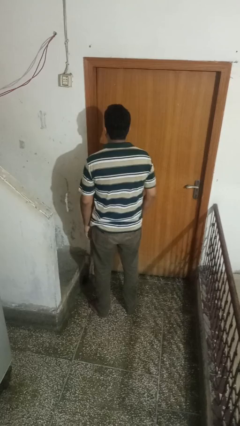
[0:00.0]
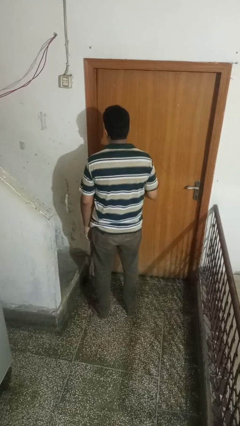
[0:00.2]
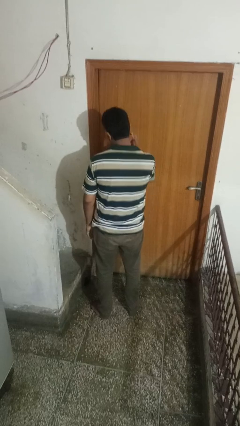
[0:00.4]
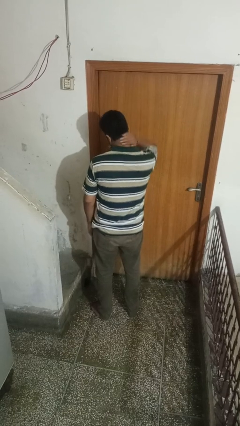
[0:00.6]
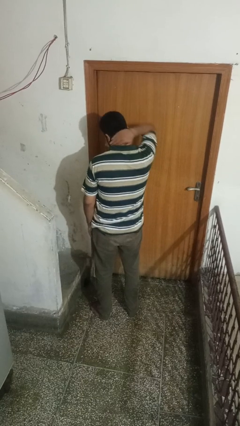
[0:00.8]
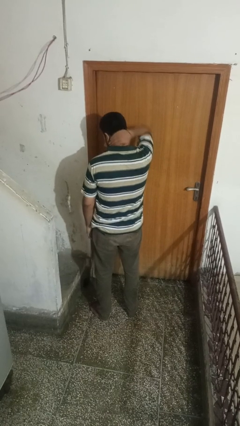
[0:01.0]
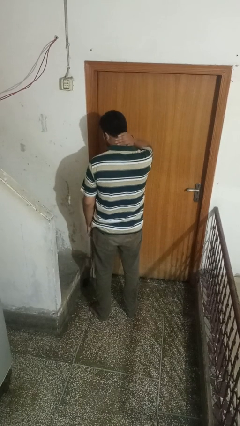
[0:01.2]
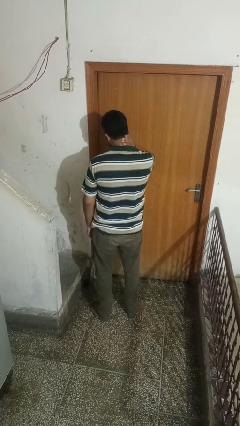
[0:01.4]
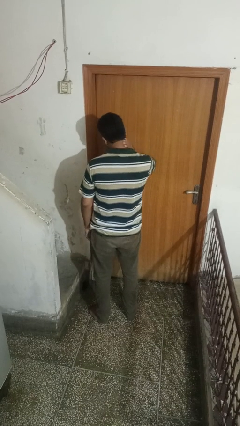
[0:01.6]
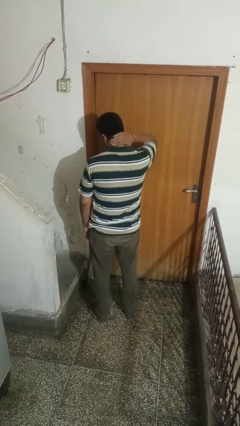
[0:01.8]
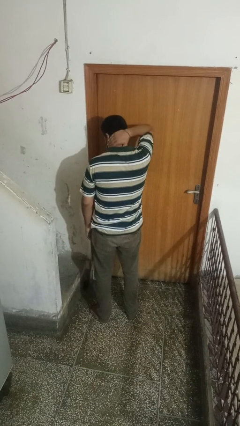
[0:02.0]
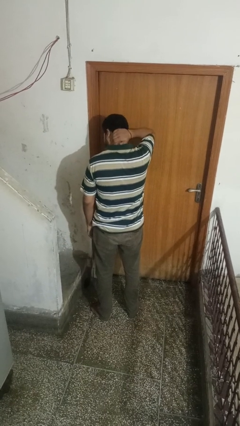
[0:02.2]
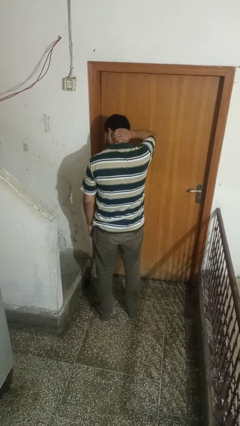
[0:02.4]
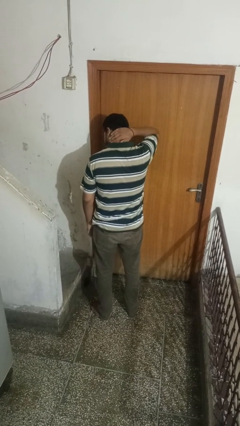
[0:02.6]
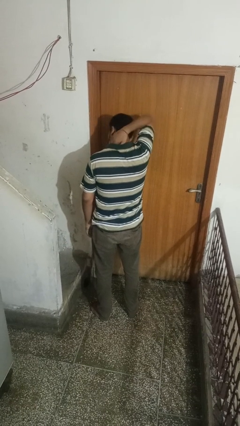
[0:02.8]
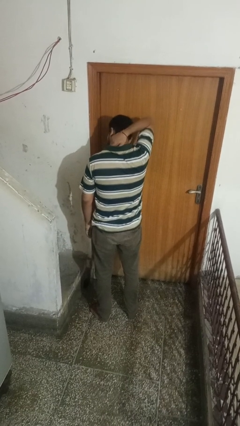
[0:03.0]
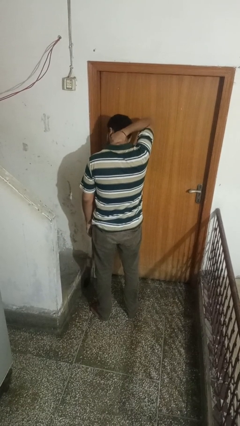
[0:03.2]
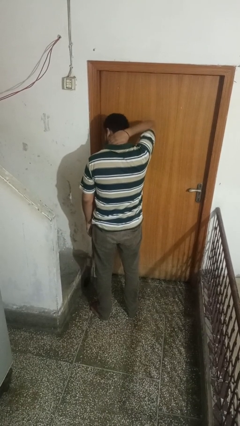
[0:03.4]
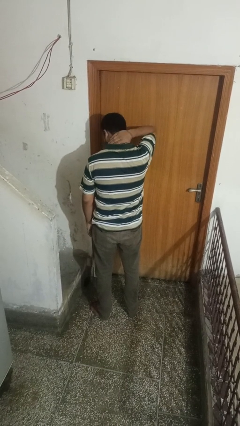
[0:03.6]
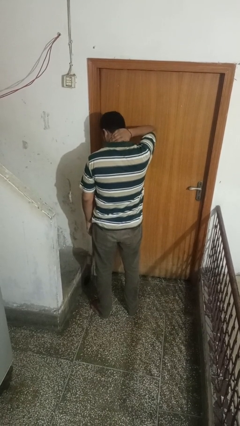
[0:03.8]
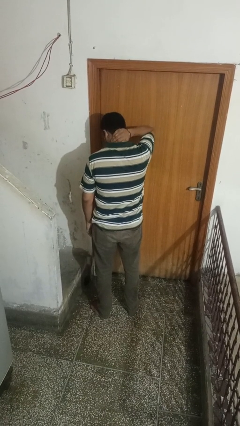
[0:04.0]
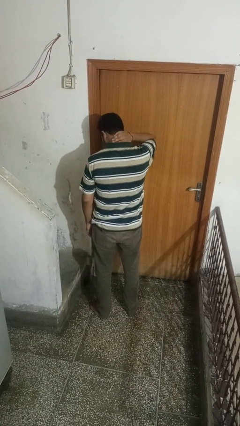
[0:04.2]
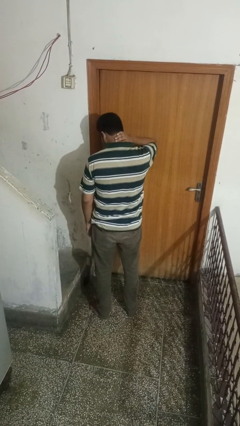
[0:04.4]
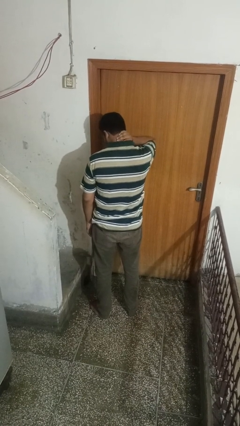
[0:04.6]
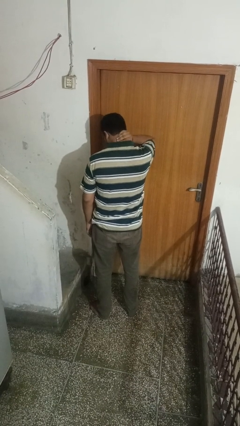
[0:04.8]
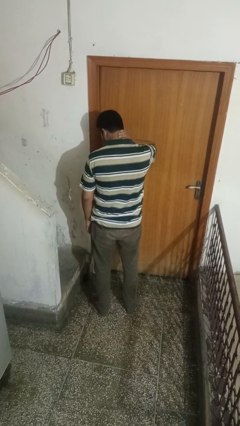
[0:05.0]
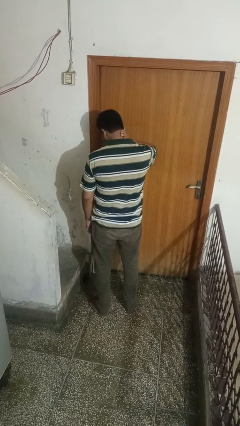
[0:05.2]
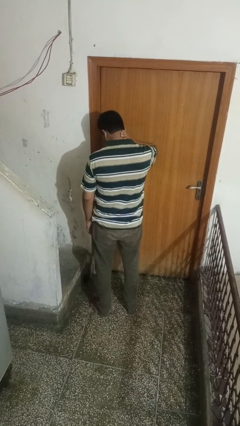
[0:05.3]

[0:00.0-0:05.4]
person rubs neck

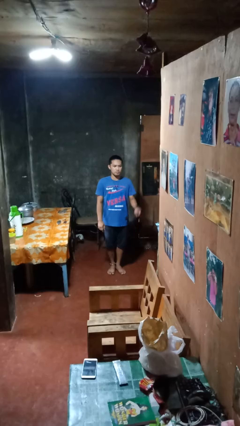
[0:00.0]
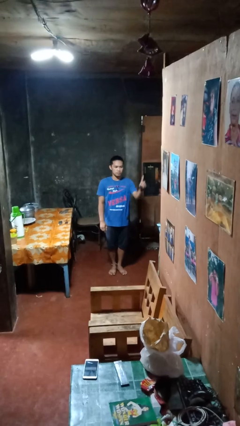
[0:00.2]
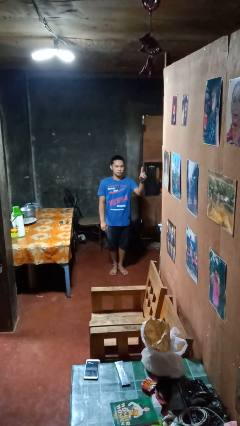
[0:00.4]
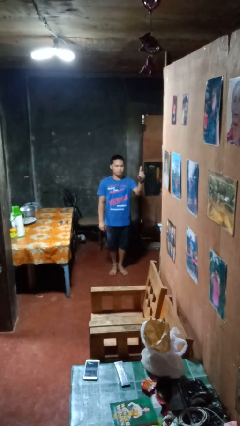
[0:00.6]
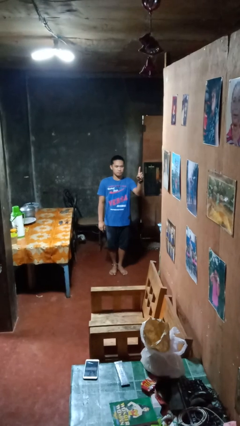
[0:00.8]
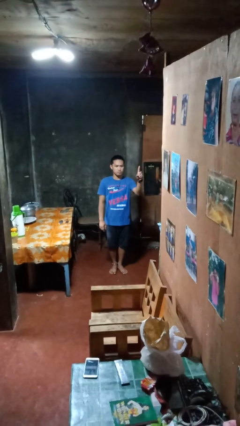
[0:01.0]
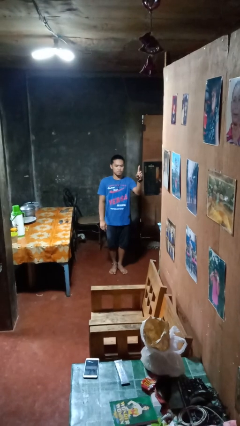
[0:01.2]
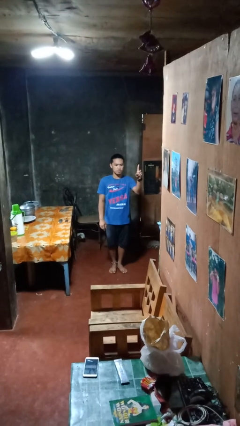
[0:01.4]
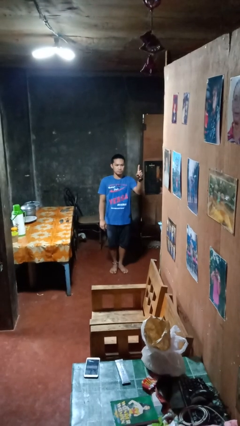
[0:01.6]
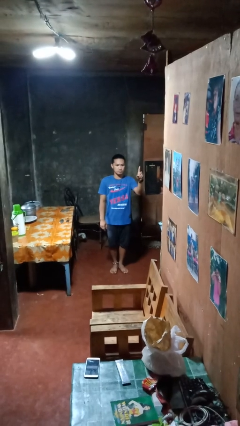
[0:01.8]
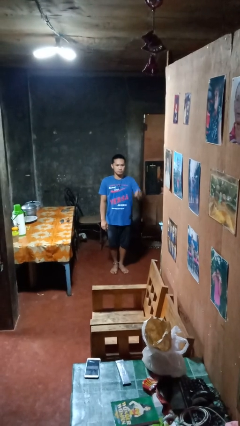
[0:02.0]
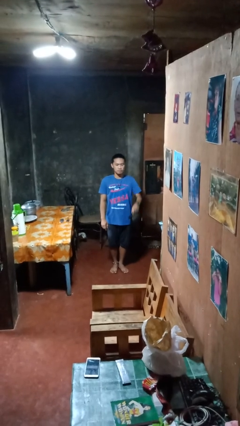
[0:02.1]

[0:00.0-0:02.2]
person gestures number one

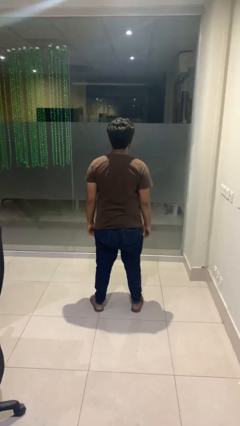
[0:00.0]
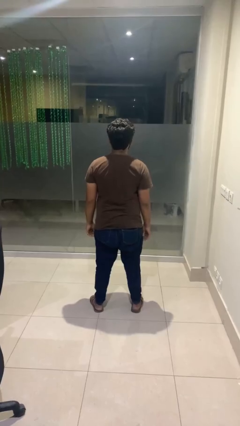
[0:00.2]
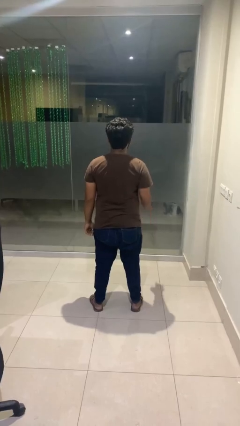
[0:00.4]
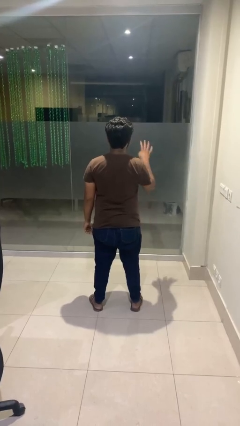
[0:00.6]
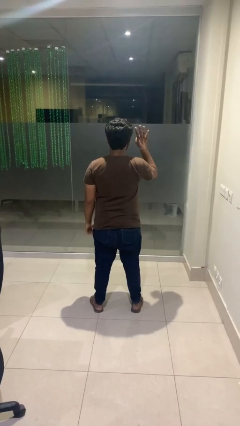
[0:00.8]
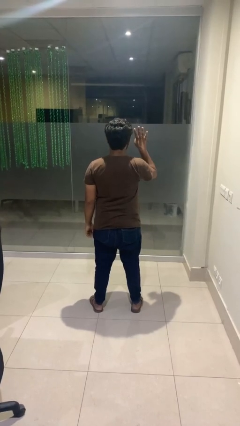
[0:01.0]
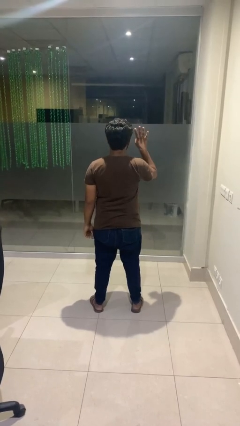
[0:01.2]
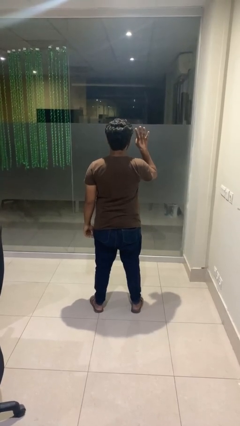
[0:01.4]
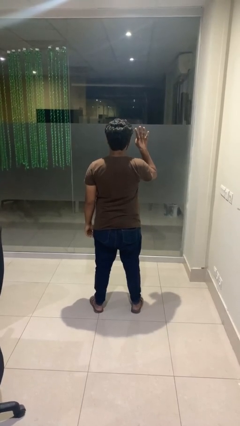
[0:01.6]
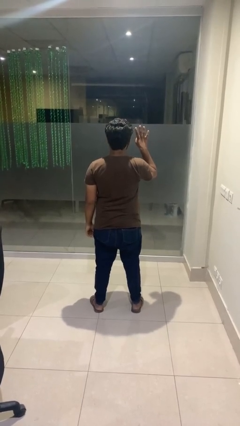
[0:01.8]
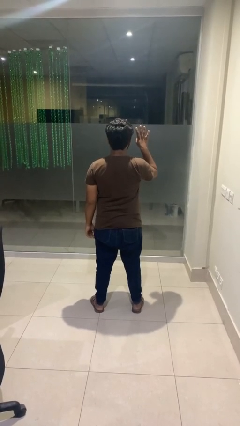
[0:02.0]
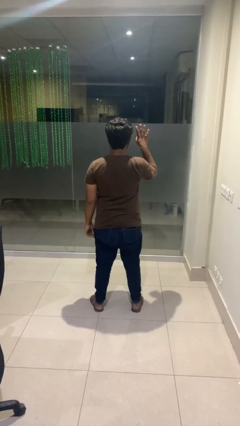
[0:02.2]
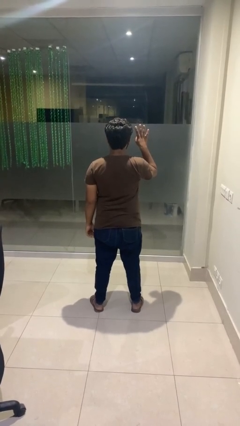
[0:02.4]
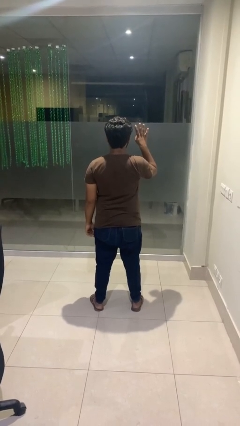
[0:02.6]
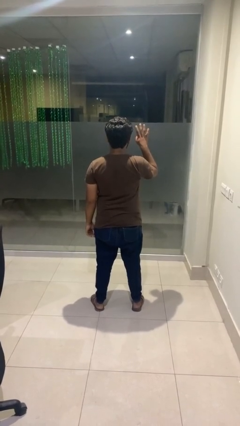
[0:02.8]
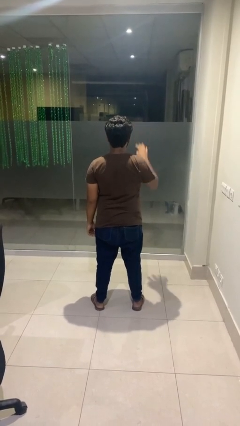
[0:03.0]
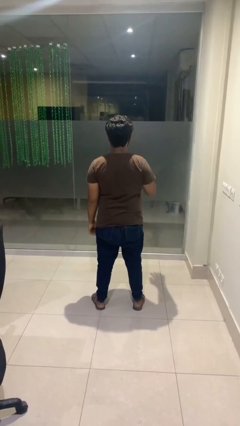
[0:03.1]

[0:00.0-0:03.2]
person gestures number four

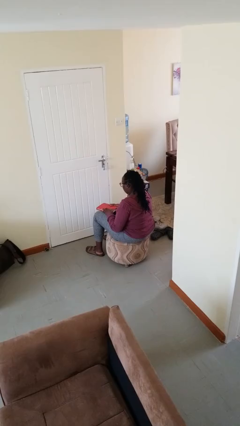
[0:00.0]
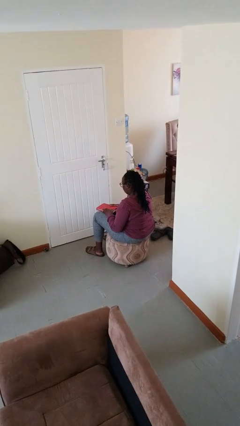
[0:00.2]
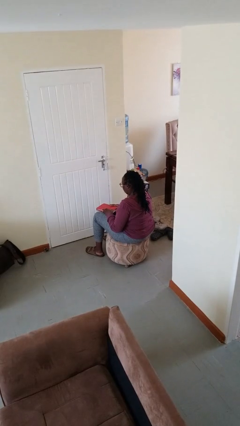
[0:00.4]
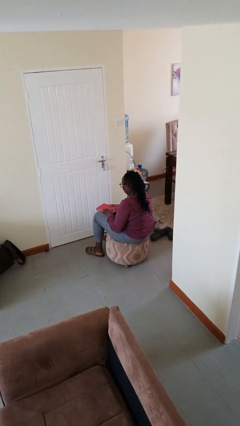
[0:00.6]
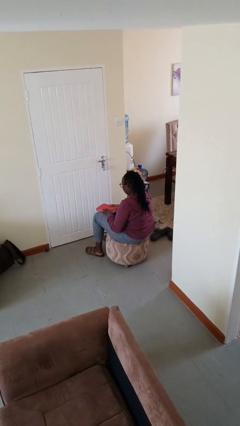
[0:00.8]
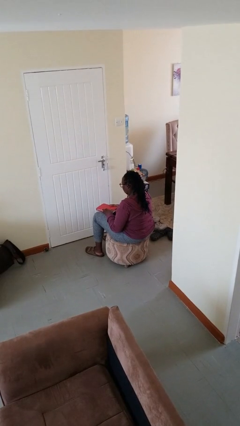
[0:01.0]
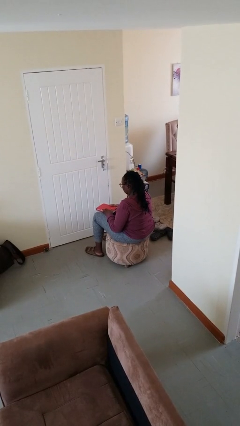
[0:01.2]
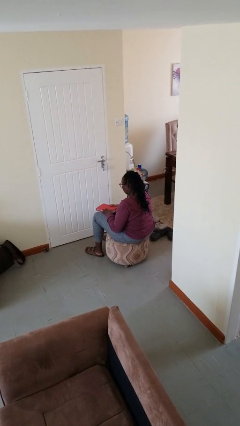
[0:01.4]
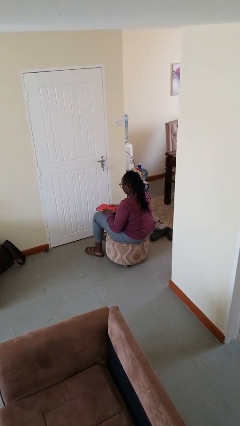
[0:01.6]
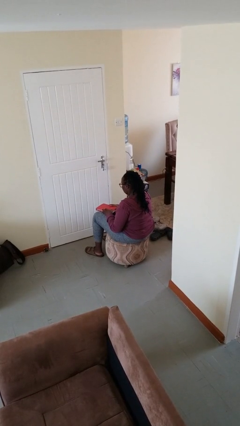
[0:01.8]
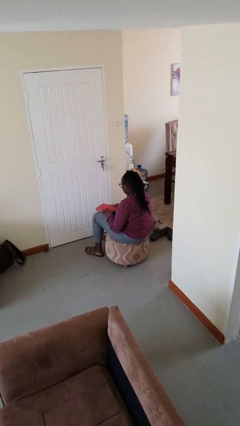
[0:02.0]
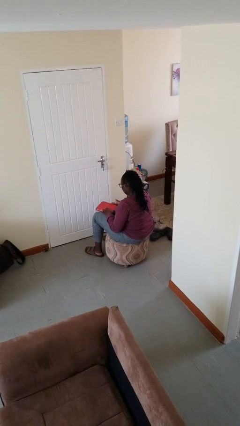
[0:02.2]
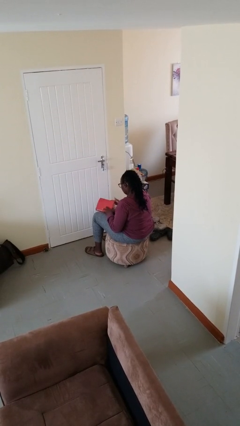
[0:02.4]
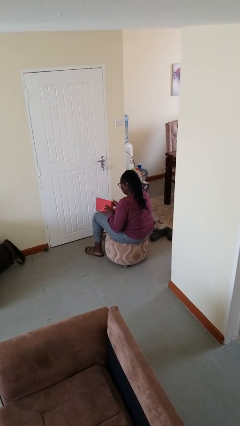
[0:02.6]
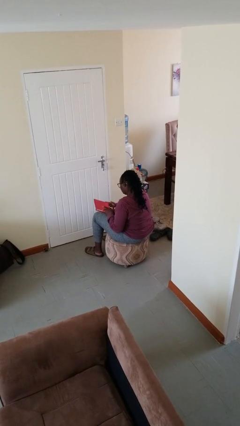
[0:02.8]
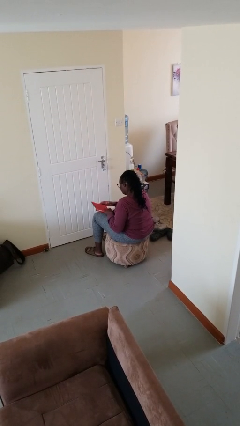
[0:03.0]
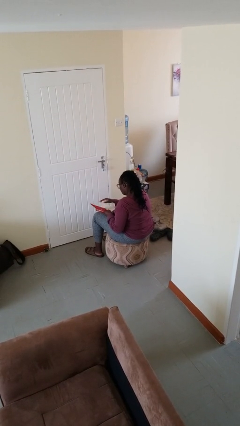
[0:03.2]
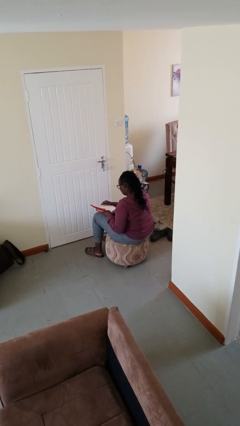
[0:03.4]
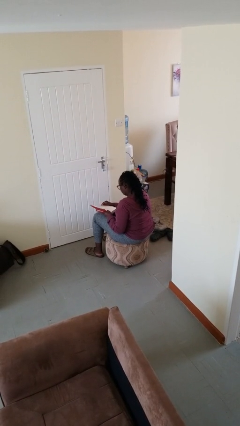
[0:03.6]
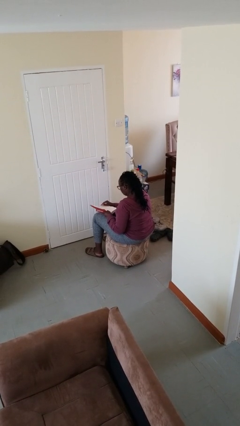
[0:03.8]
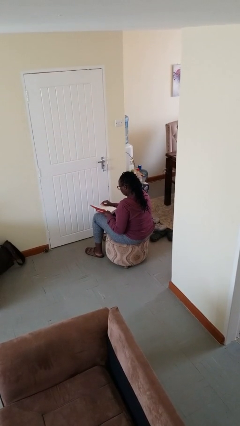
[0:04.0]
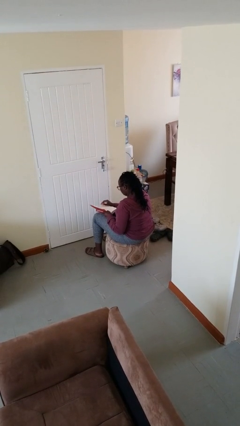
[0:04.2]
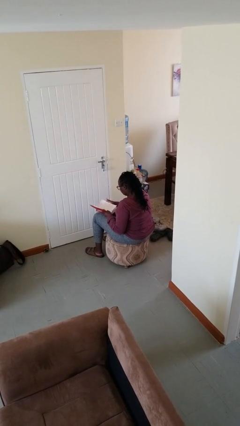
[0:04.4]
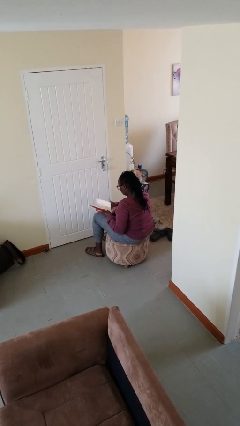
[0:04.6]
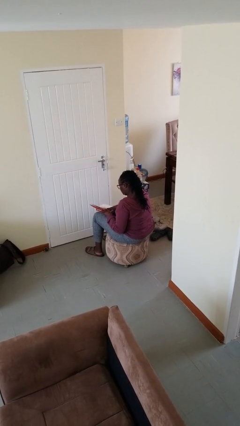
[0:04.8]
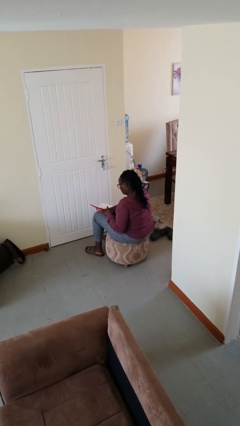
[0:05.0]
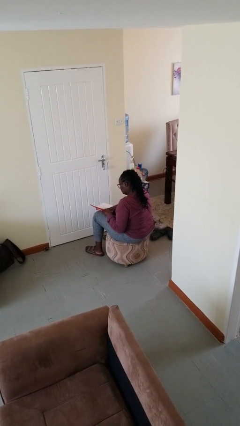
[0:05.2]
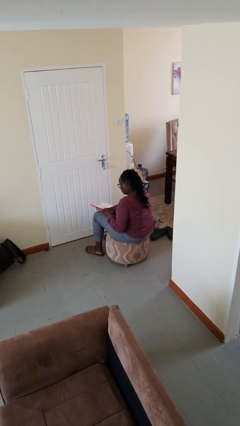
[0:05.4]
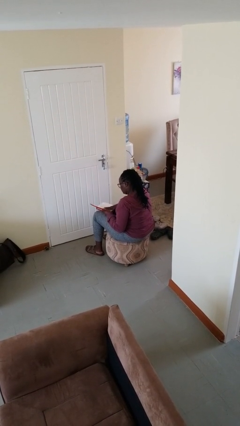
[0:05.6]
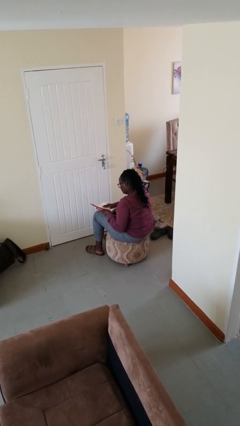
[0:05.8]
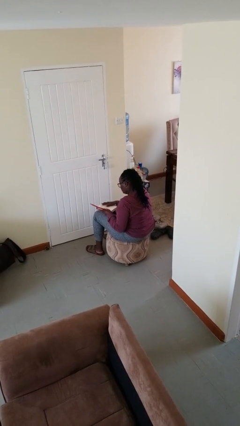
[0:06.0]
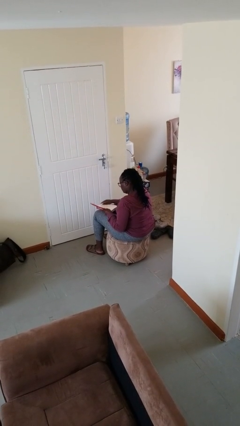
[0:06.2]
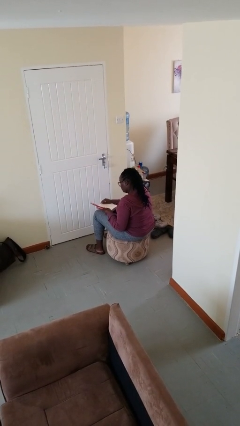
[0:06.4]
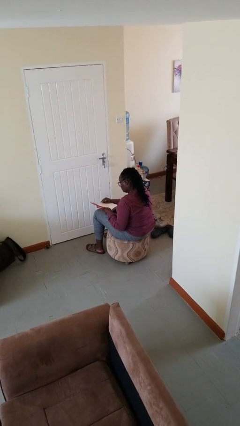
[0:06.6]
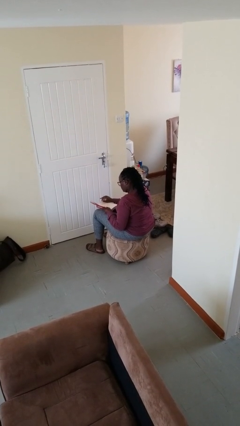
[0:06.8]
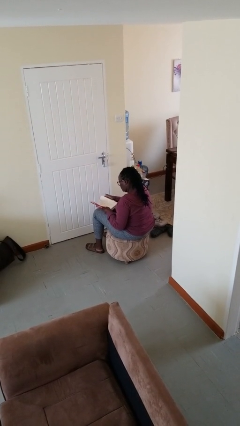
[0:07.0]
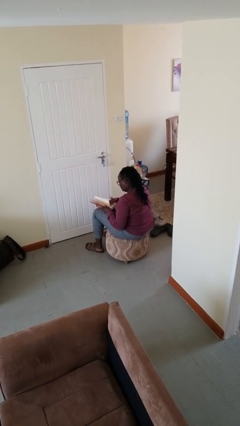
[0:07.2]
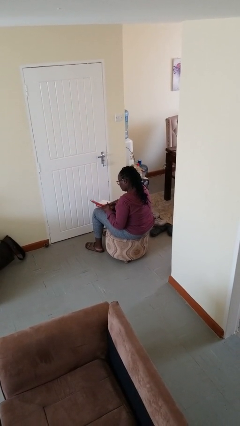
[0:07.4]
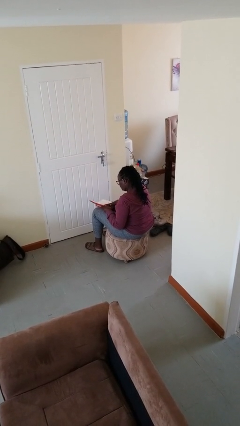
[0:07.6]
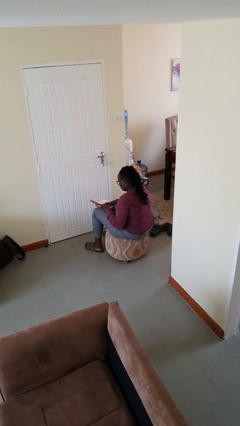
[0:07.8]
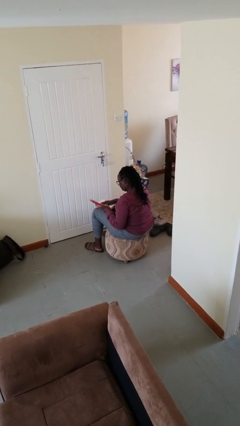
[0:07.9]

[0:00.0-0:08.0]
person reads book
